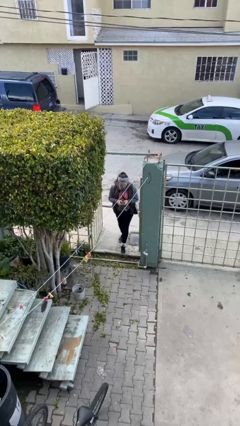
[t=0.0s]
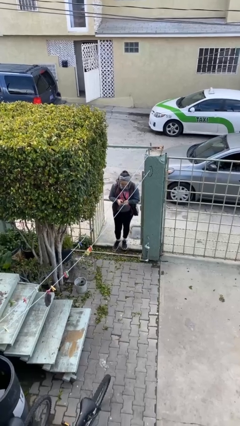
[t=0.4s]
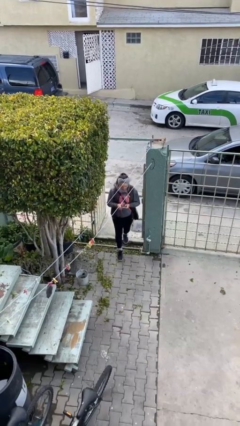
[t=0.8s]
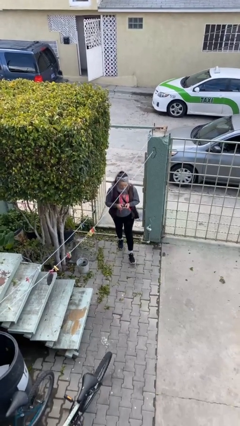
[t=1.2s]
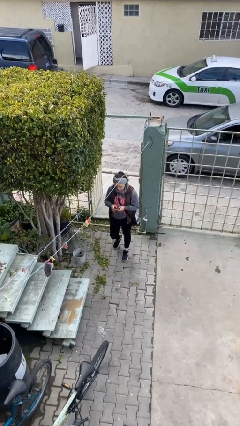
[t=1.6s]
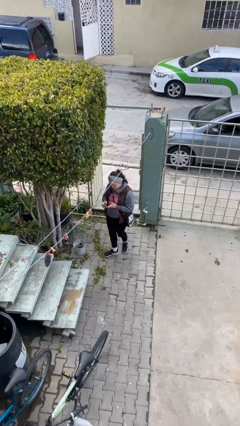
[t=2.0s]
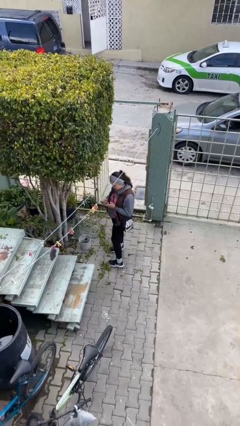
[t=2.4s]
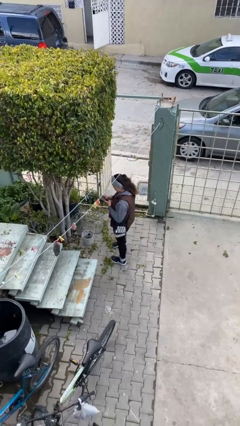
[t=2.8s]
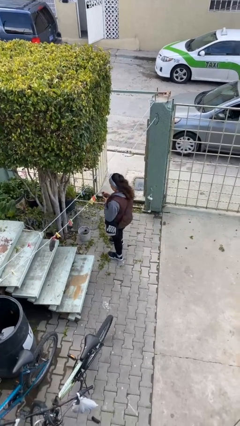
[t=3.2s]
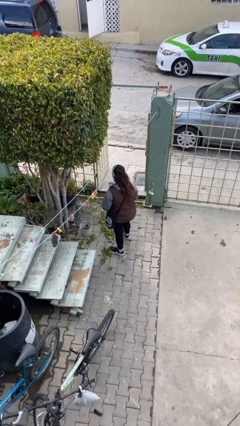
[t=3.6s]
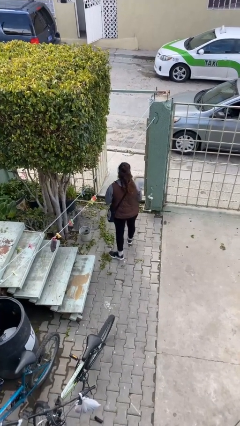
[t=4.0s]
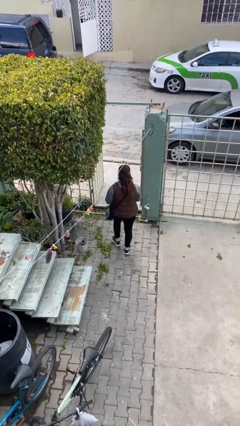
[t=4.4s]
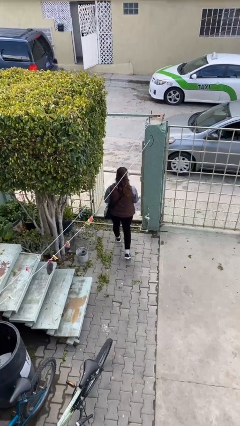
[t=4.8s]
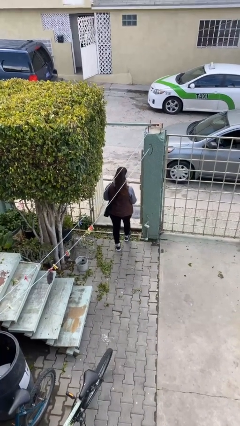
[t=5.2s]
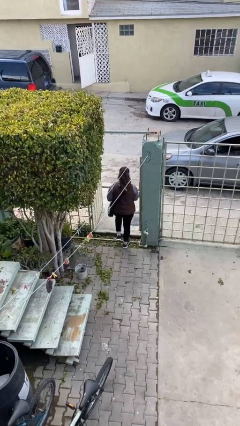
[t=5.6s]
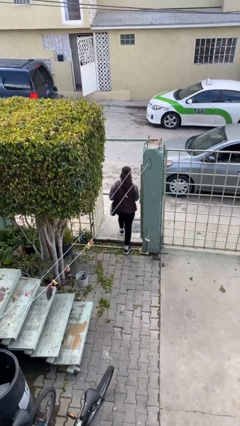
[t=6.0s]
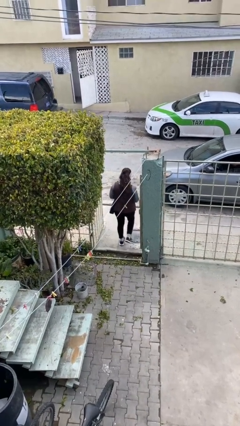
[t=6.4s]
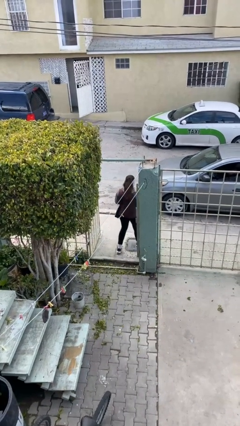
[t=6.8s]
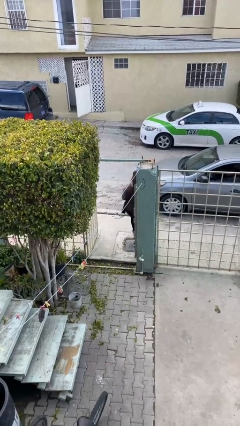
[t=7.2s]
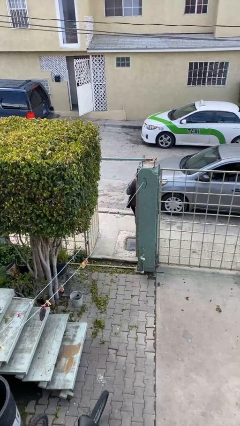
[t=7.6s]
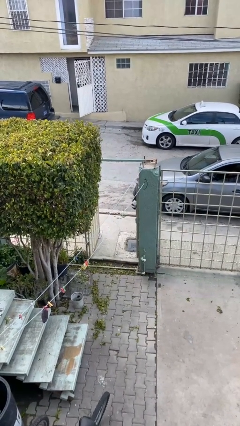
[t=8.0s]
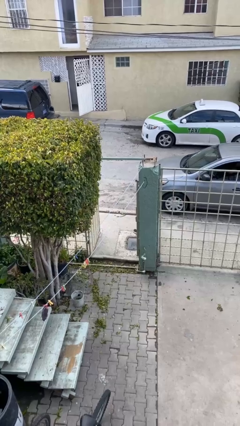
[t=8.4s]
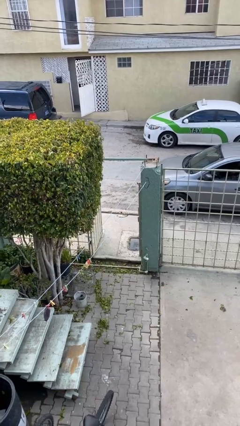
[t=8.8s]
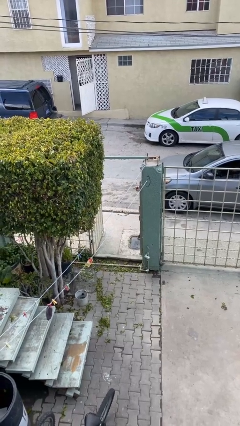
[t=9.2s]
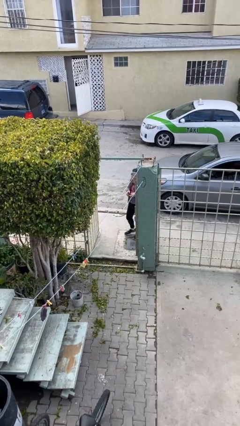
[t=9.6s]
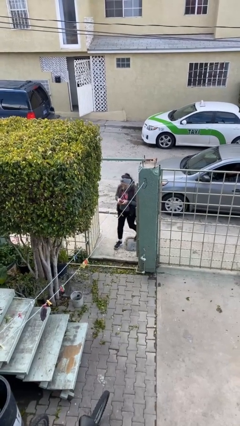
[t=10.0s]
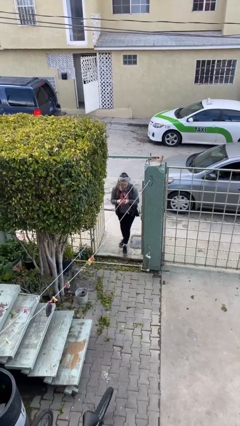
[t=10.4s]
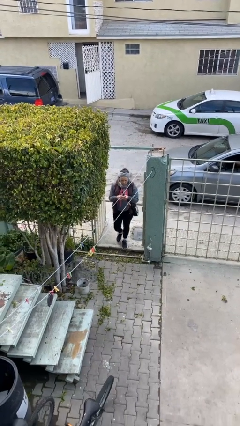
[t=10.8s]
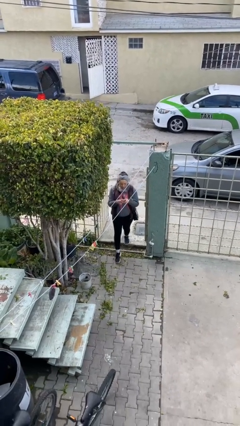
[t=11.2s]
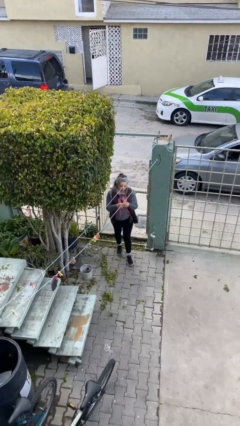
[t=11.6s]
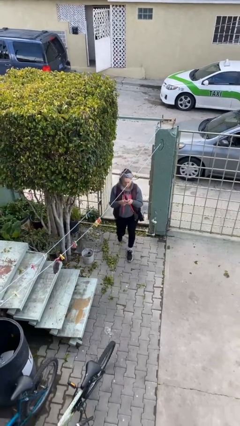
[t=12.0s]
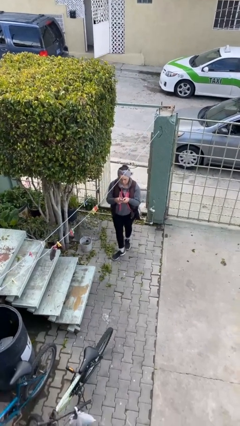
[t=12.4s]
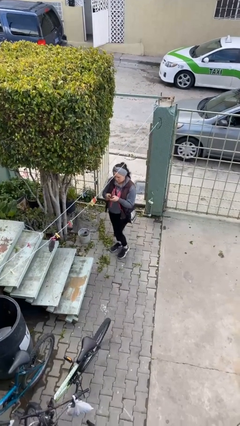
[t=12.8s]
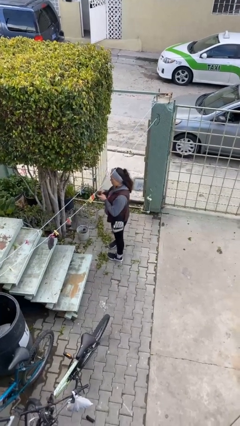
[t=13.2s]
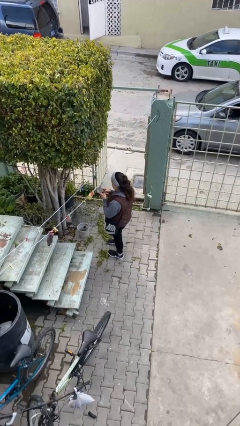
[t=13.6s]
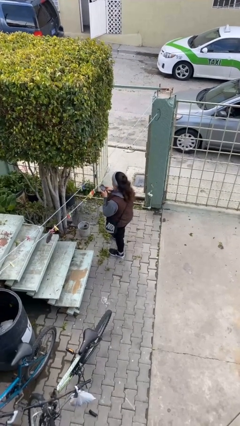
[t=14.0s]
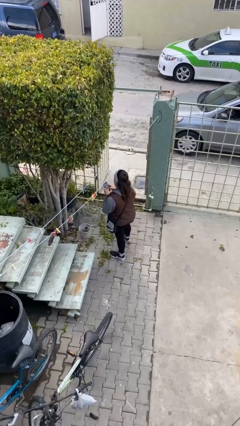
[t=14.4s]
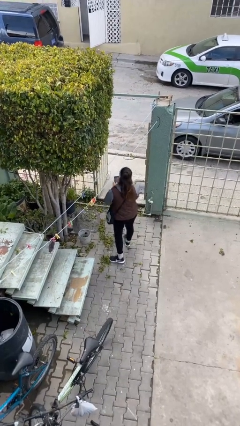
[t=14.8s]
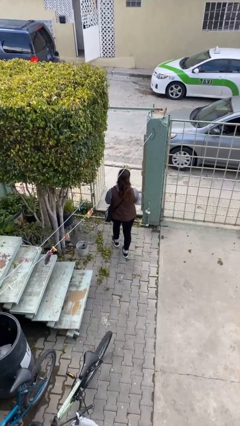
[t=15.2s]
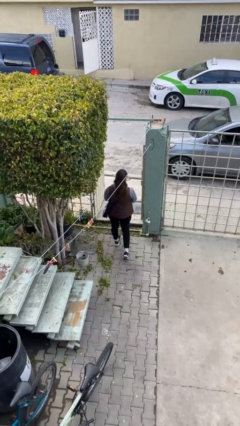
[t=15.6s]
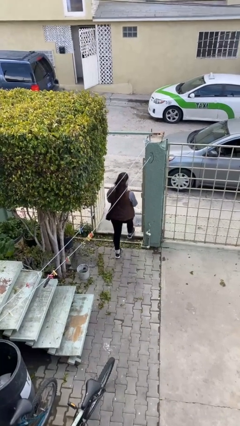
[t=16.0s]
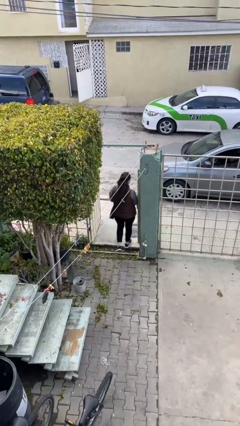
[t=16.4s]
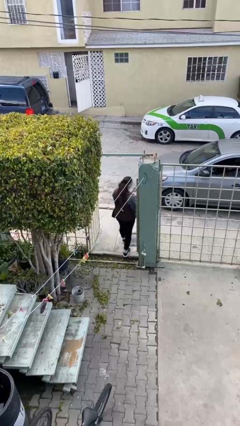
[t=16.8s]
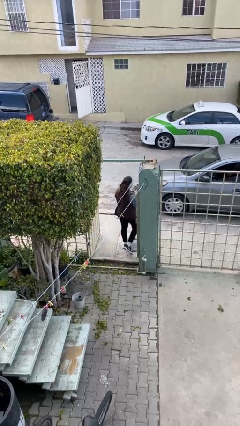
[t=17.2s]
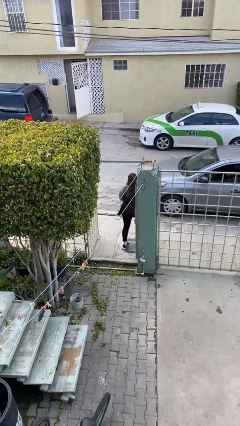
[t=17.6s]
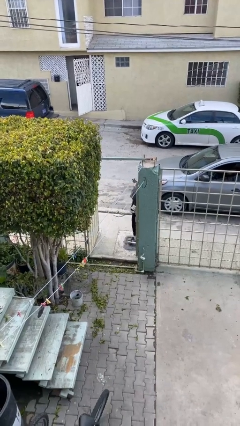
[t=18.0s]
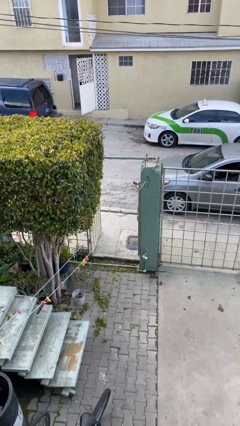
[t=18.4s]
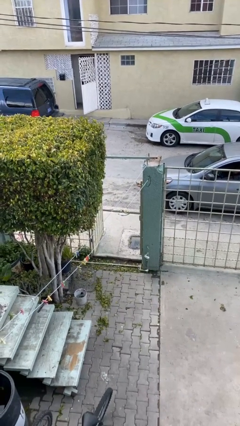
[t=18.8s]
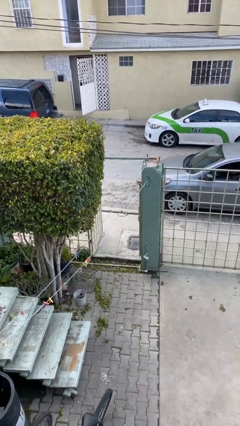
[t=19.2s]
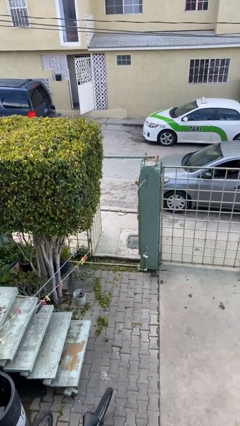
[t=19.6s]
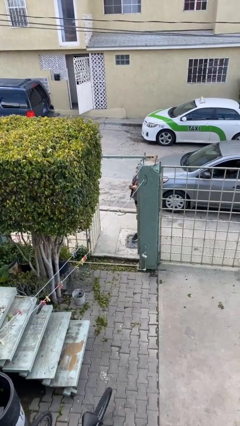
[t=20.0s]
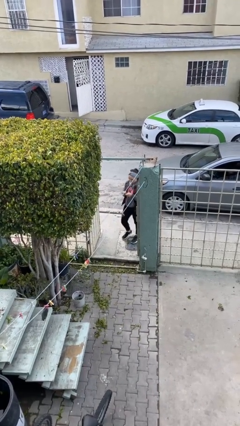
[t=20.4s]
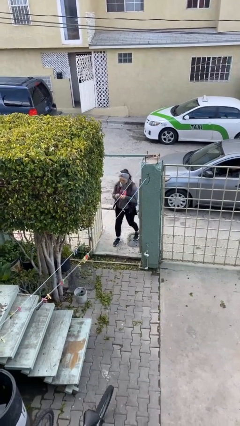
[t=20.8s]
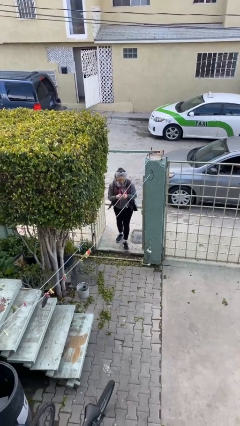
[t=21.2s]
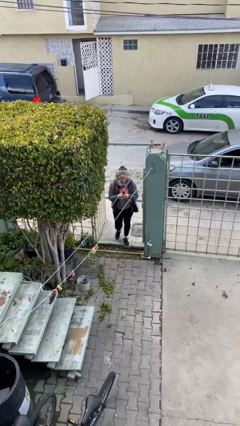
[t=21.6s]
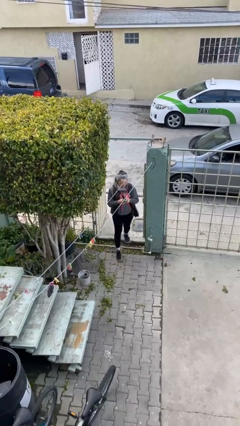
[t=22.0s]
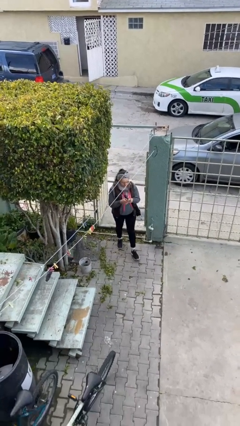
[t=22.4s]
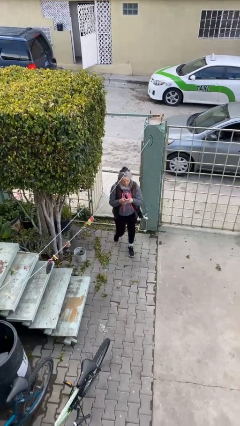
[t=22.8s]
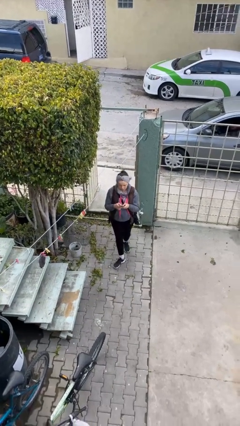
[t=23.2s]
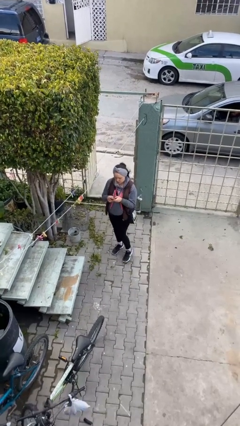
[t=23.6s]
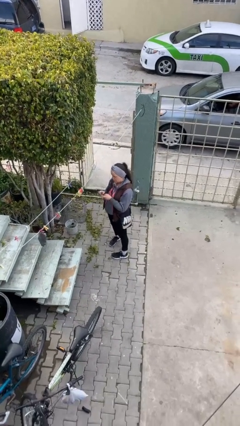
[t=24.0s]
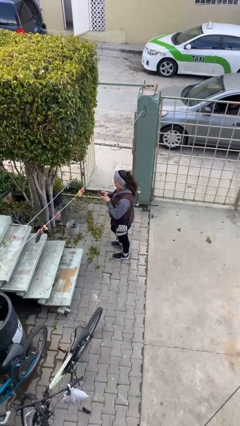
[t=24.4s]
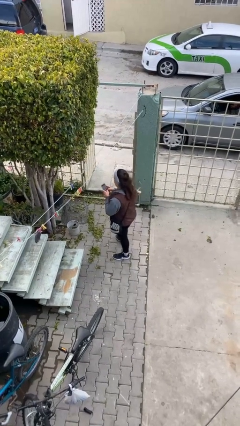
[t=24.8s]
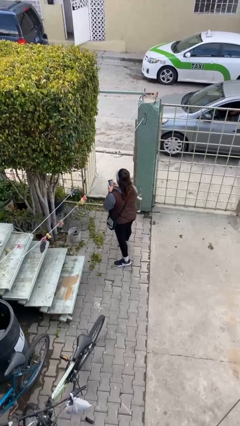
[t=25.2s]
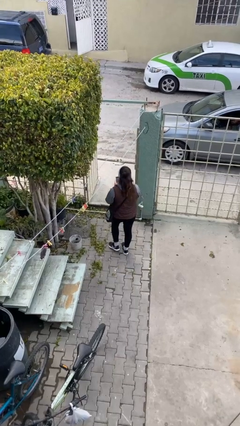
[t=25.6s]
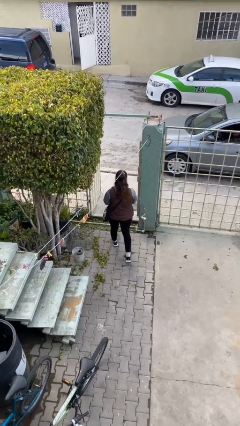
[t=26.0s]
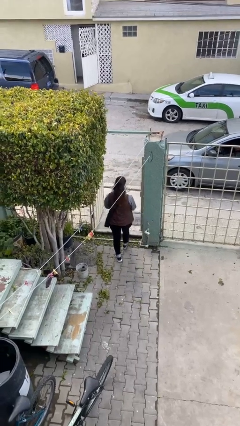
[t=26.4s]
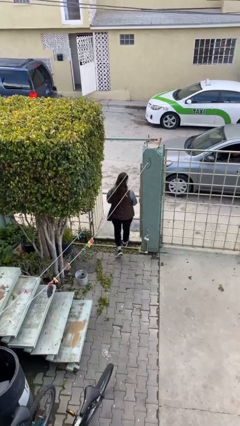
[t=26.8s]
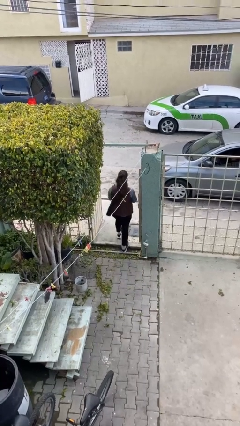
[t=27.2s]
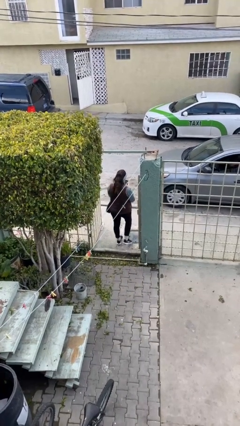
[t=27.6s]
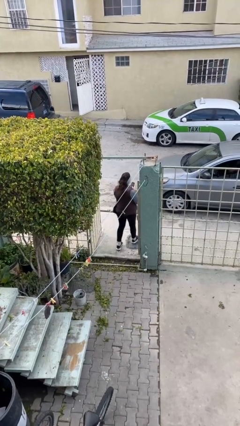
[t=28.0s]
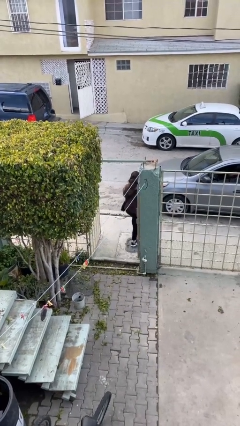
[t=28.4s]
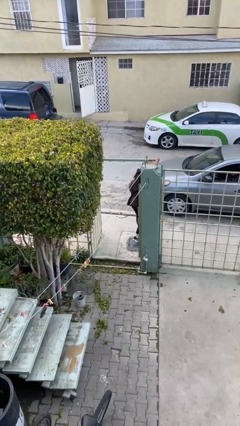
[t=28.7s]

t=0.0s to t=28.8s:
person texts on phone

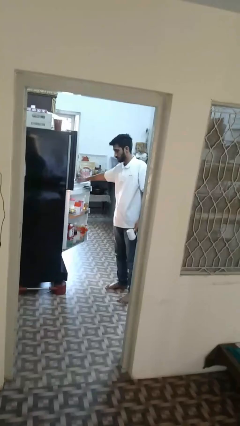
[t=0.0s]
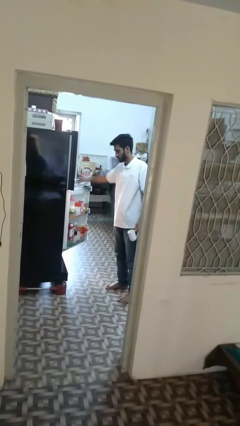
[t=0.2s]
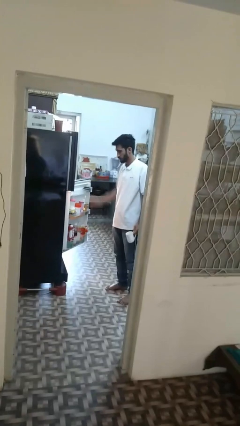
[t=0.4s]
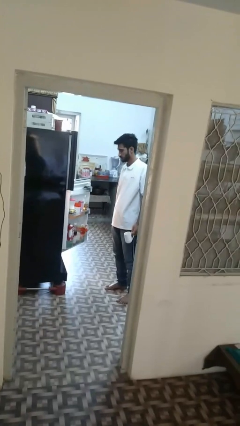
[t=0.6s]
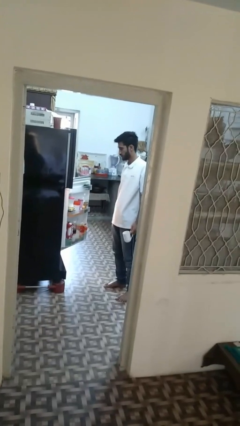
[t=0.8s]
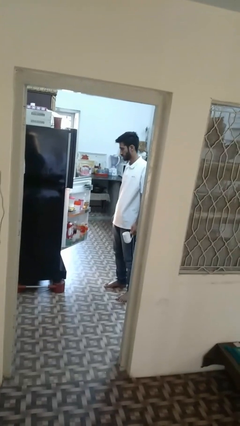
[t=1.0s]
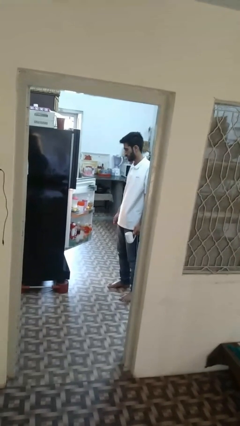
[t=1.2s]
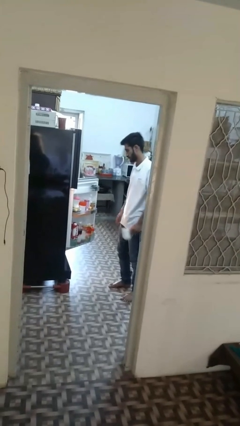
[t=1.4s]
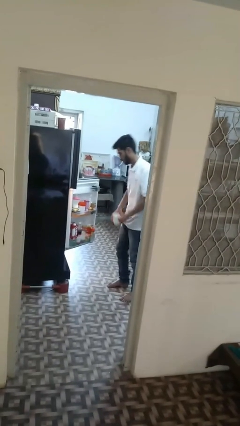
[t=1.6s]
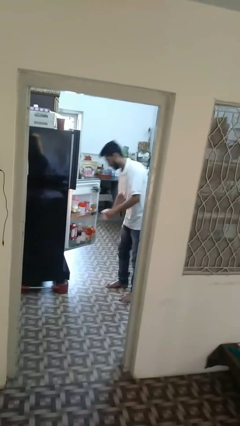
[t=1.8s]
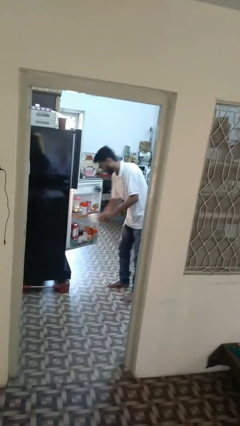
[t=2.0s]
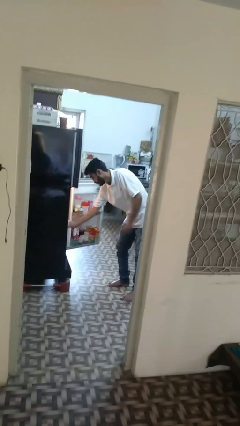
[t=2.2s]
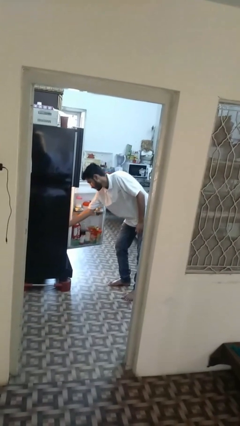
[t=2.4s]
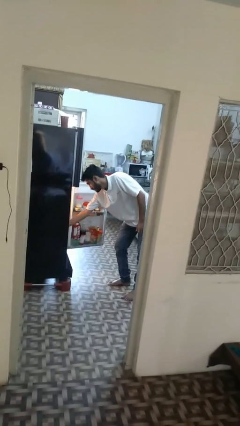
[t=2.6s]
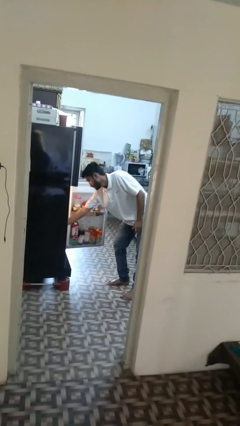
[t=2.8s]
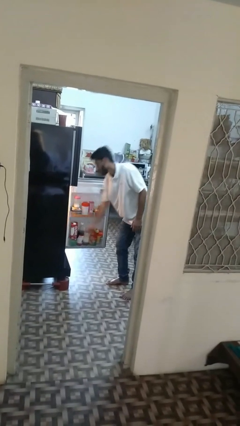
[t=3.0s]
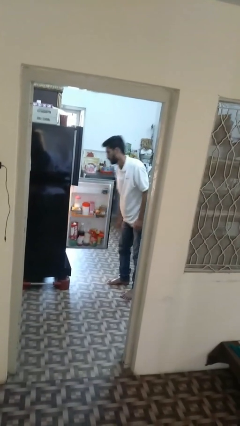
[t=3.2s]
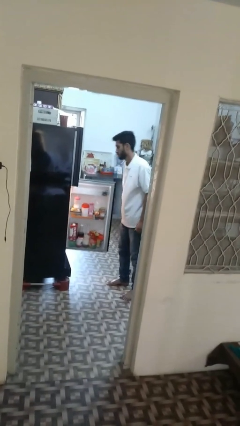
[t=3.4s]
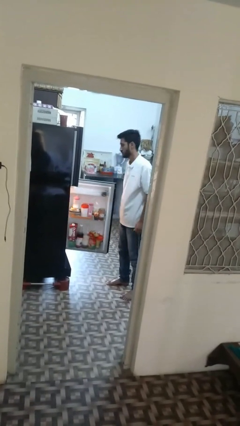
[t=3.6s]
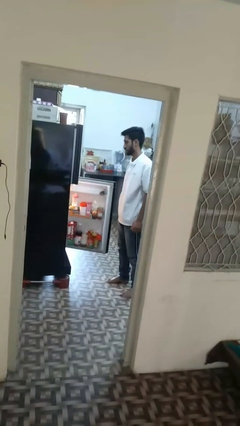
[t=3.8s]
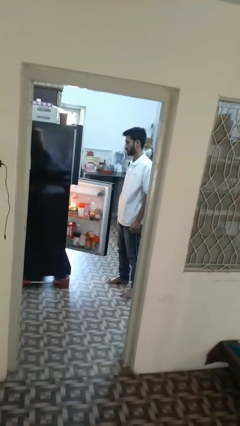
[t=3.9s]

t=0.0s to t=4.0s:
person puts object into refrigerator
